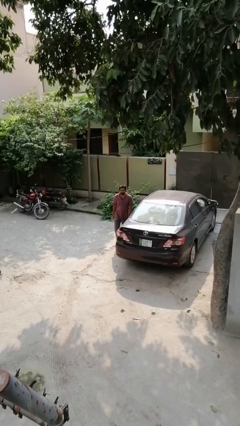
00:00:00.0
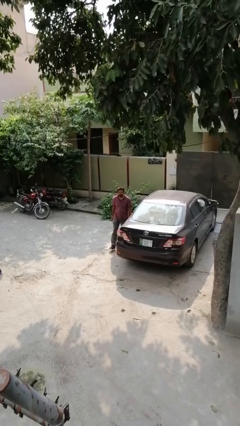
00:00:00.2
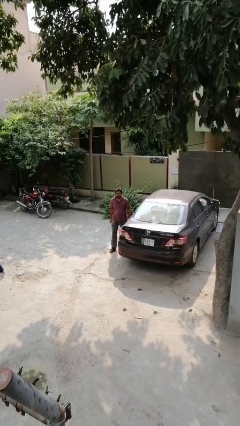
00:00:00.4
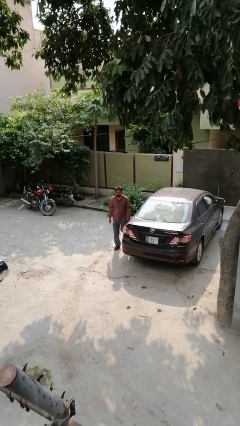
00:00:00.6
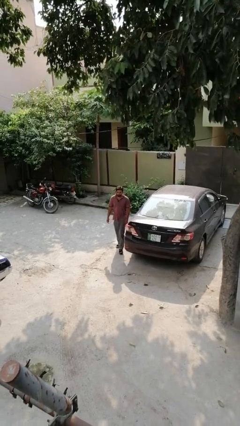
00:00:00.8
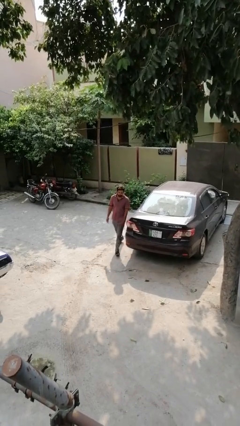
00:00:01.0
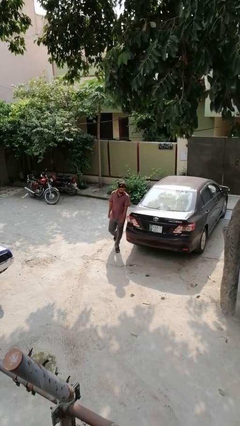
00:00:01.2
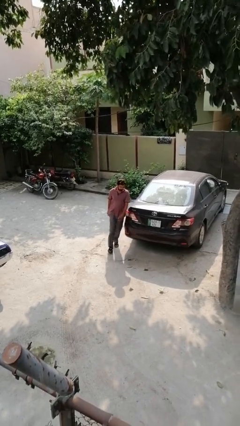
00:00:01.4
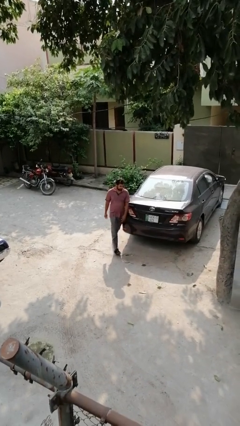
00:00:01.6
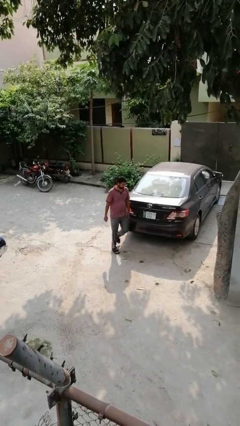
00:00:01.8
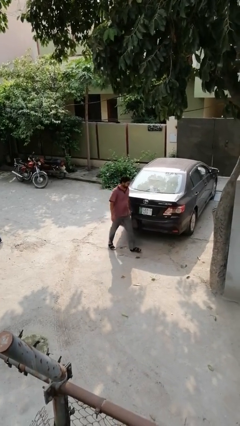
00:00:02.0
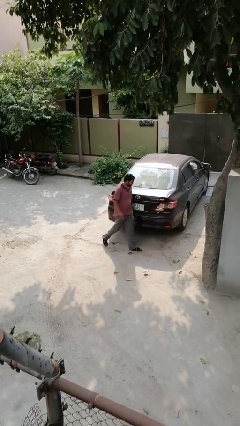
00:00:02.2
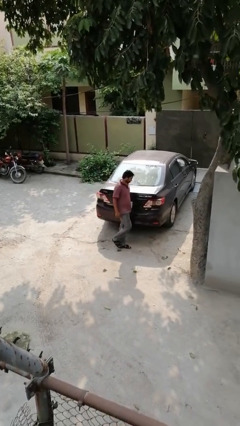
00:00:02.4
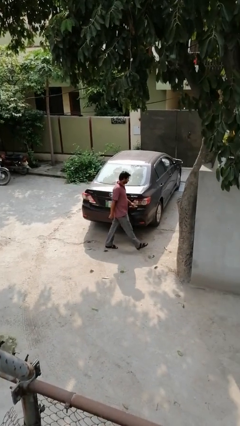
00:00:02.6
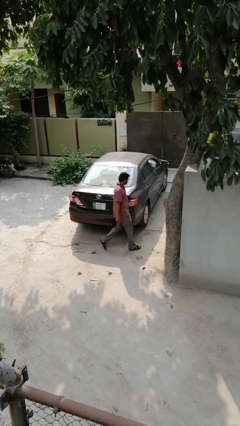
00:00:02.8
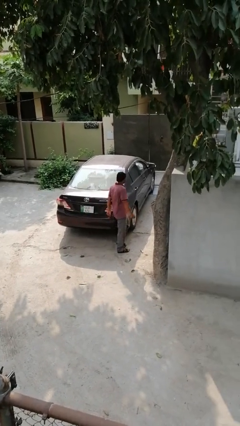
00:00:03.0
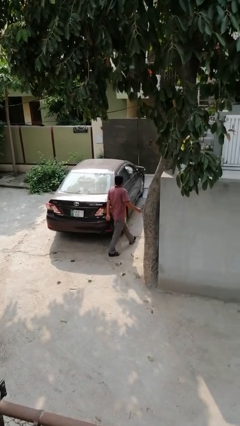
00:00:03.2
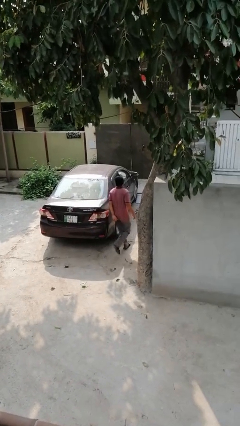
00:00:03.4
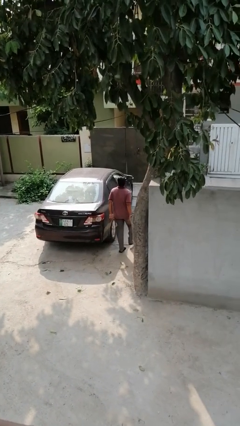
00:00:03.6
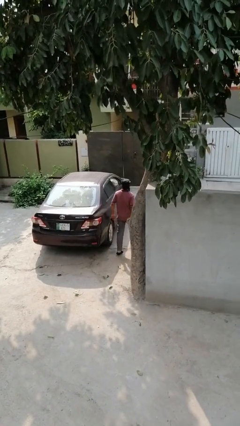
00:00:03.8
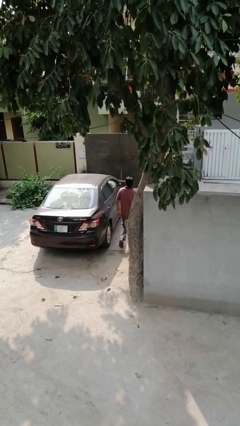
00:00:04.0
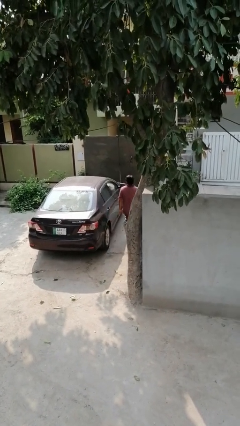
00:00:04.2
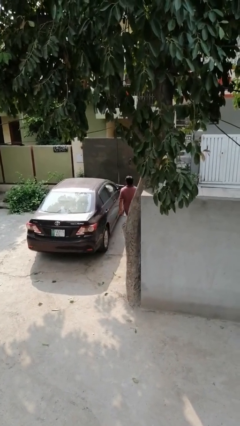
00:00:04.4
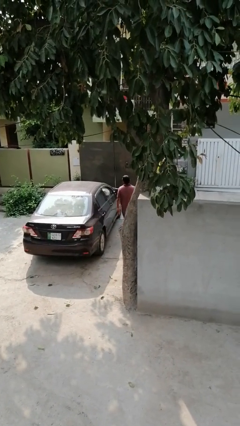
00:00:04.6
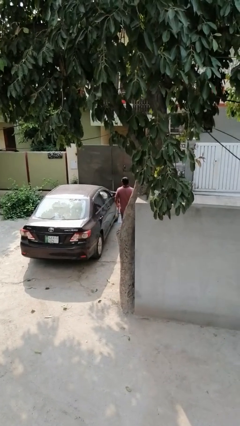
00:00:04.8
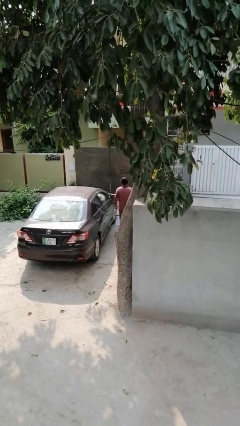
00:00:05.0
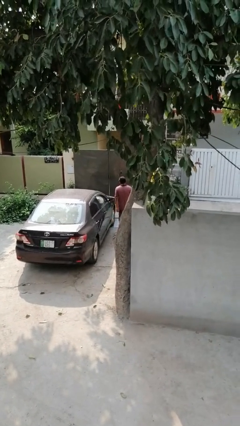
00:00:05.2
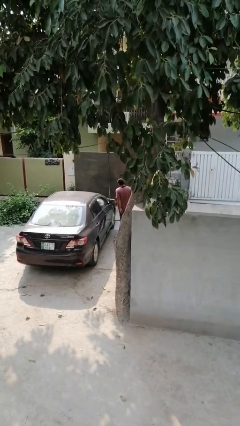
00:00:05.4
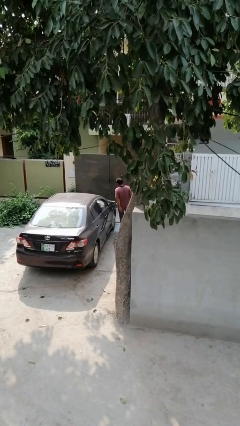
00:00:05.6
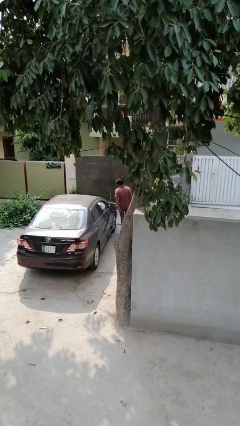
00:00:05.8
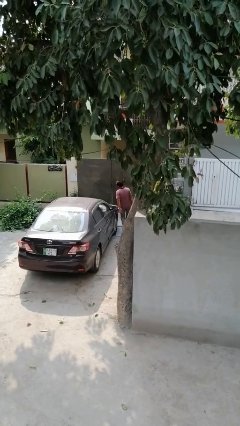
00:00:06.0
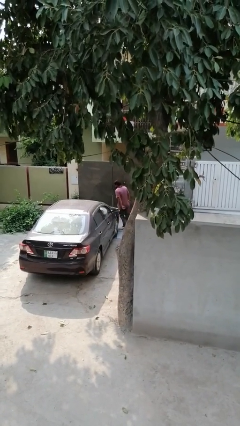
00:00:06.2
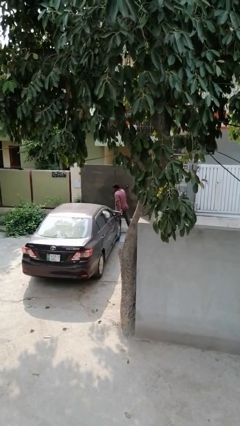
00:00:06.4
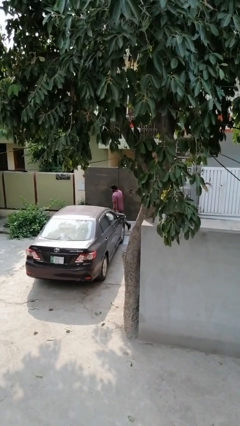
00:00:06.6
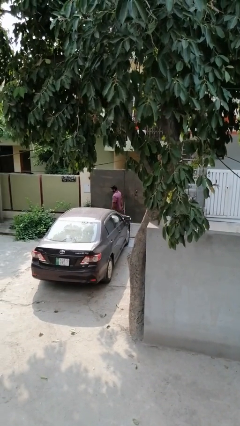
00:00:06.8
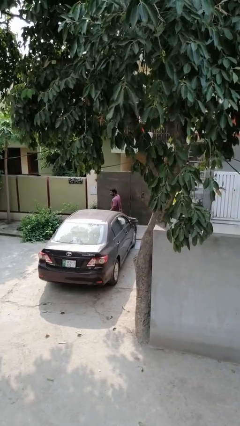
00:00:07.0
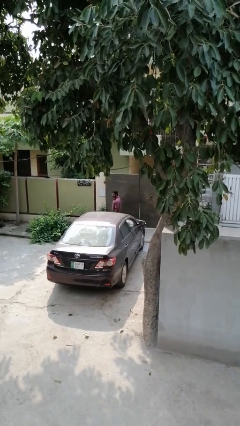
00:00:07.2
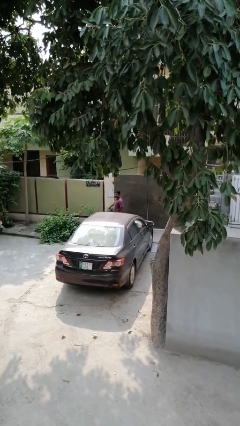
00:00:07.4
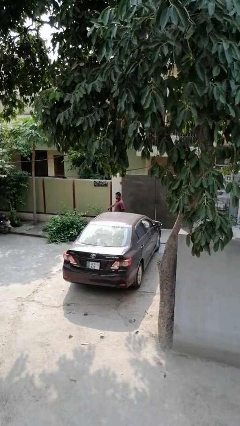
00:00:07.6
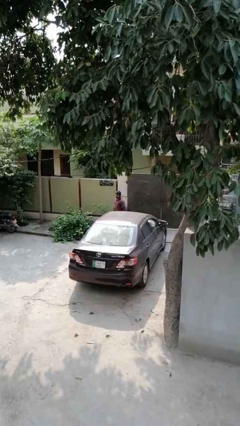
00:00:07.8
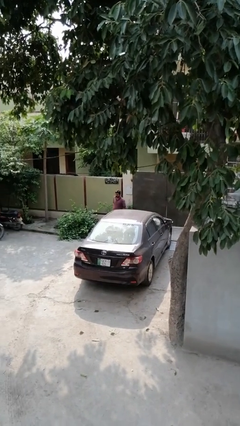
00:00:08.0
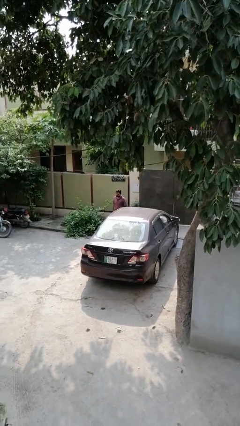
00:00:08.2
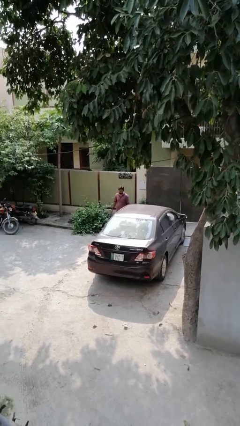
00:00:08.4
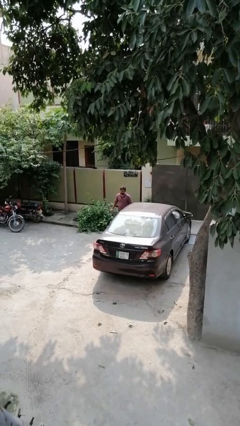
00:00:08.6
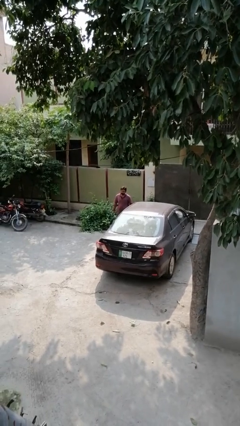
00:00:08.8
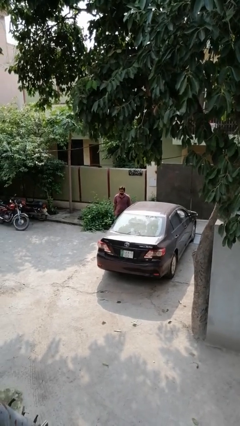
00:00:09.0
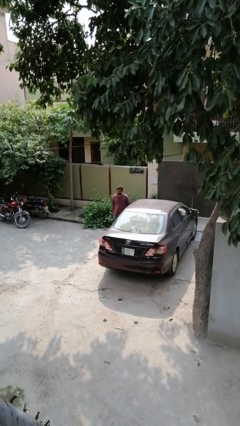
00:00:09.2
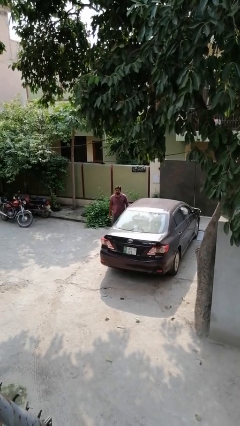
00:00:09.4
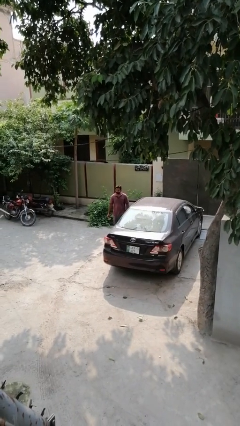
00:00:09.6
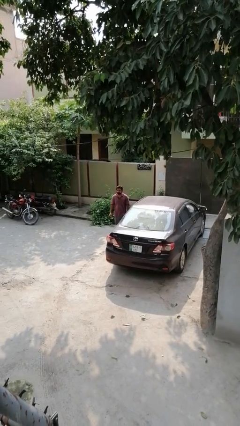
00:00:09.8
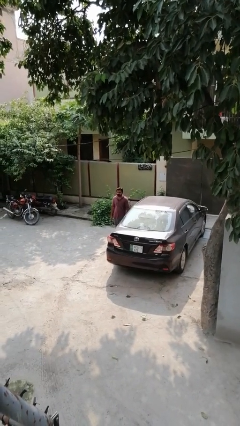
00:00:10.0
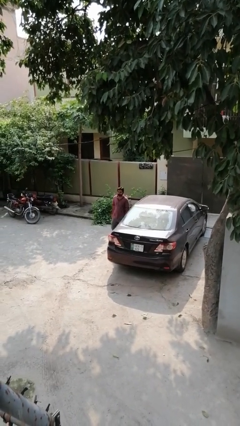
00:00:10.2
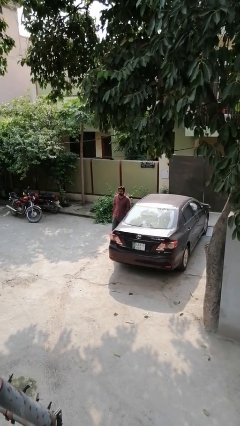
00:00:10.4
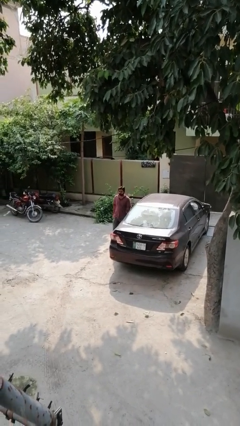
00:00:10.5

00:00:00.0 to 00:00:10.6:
person walks around car

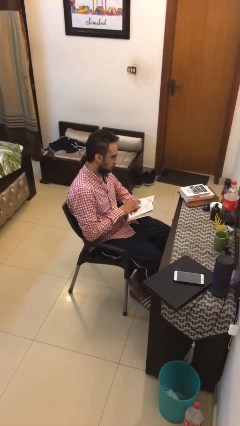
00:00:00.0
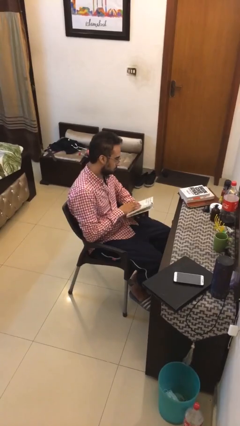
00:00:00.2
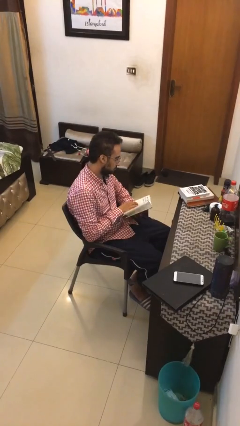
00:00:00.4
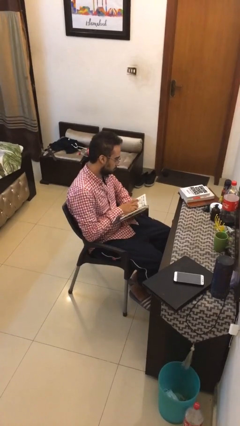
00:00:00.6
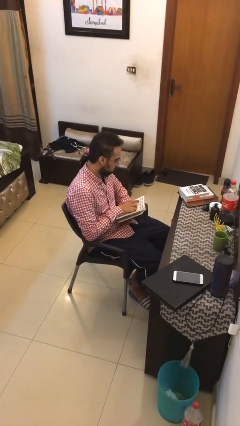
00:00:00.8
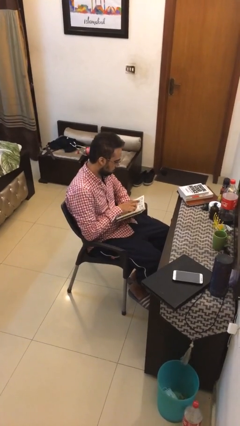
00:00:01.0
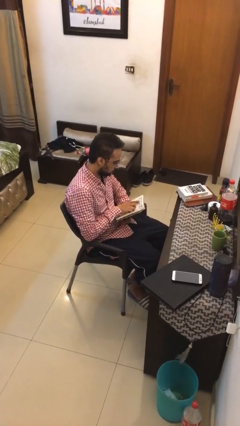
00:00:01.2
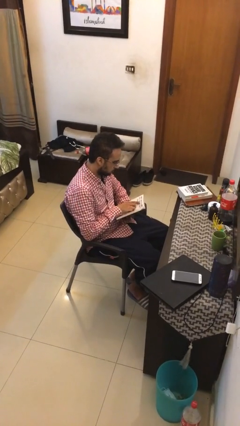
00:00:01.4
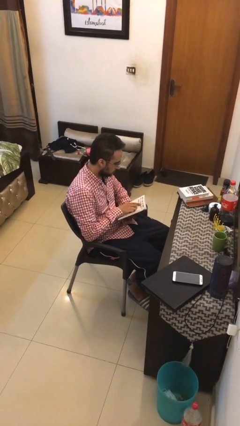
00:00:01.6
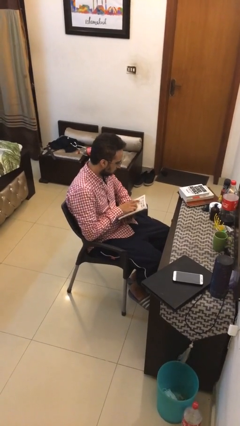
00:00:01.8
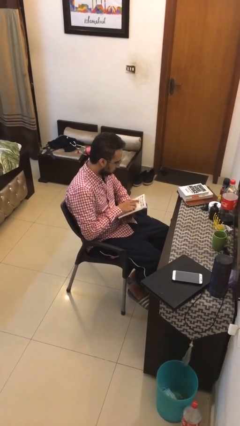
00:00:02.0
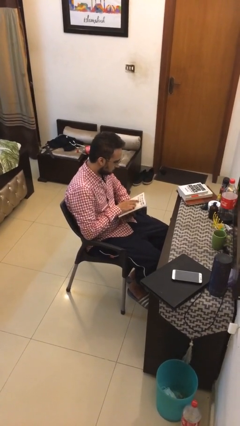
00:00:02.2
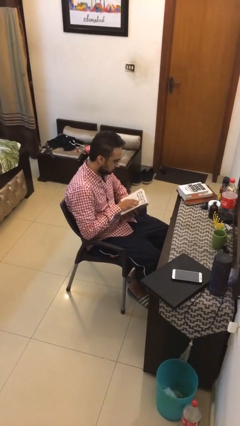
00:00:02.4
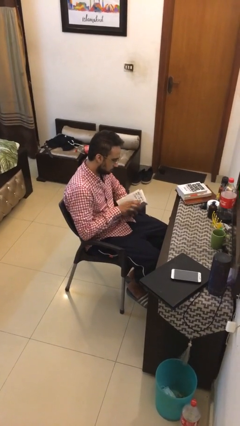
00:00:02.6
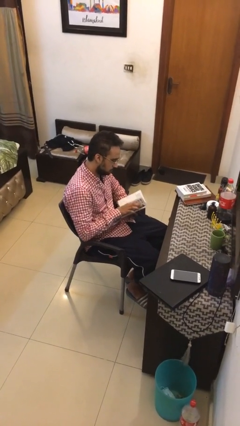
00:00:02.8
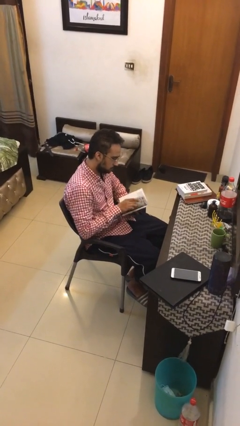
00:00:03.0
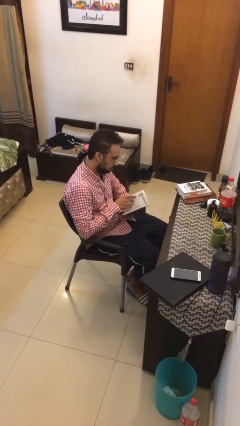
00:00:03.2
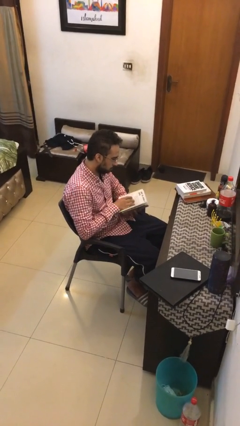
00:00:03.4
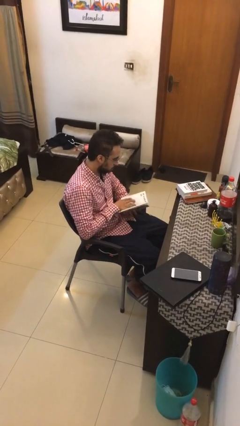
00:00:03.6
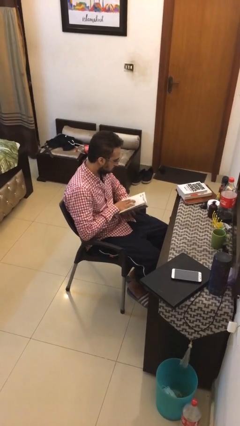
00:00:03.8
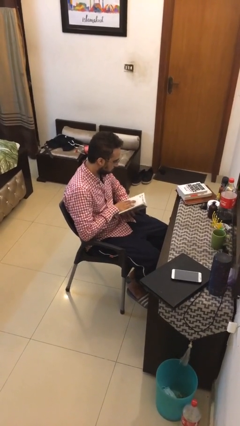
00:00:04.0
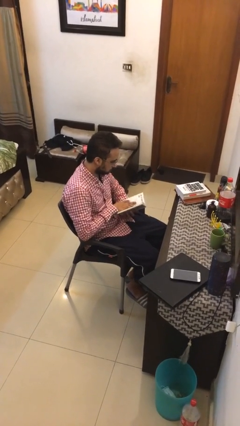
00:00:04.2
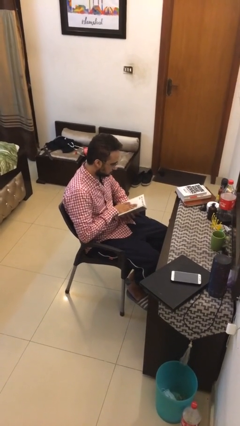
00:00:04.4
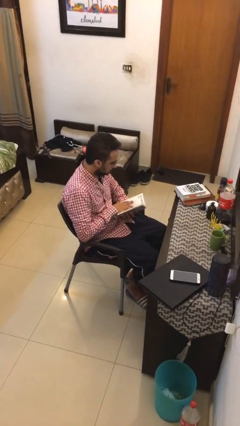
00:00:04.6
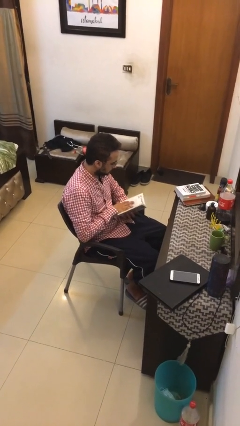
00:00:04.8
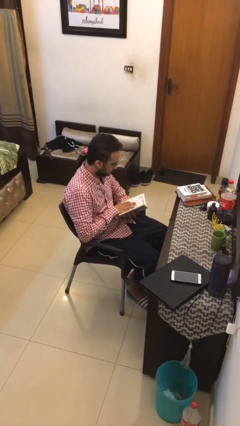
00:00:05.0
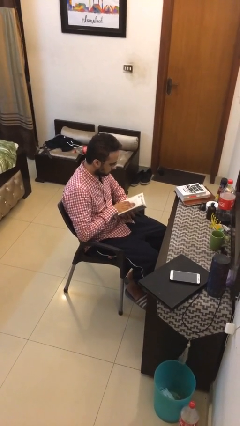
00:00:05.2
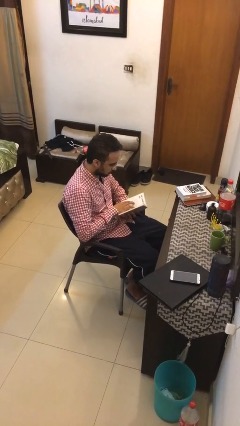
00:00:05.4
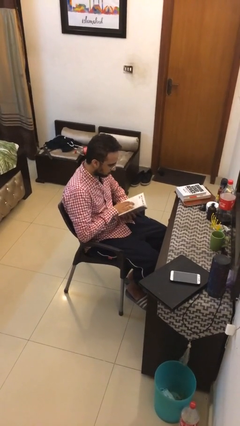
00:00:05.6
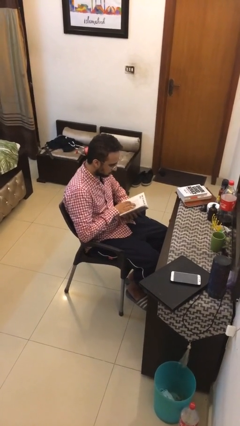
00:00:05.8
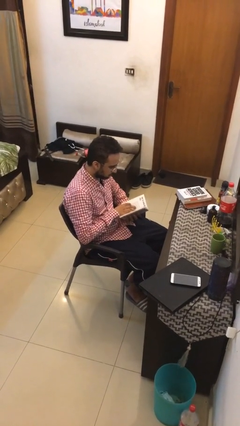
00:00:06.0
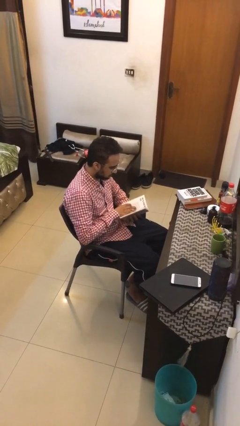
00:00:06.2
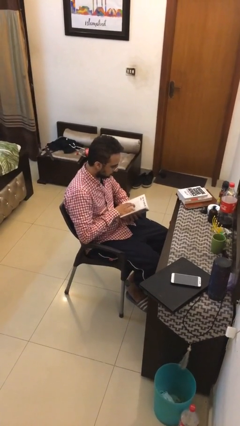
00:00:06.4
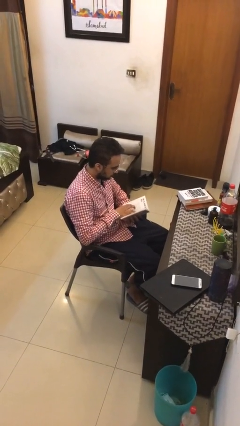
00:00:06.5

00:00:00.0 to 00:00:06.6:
person reads document

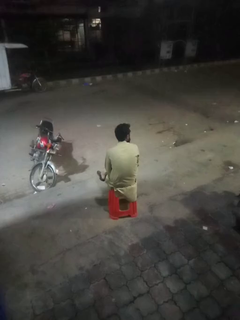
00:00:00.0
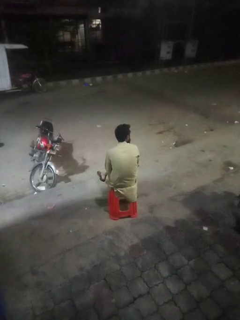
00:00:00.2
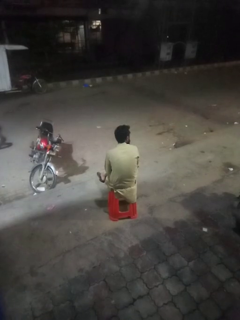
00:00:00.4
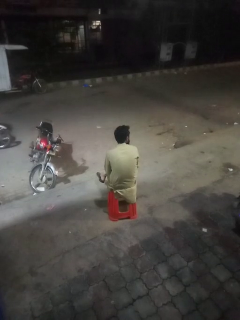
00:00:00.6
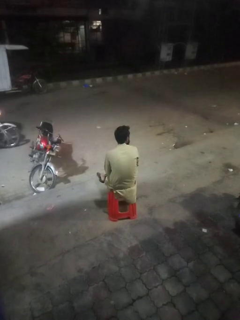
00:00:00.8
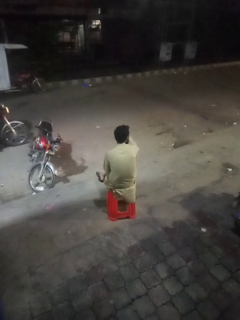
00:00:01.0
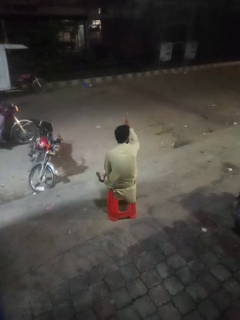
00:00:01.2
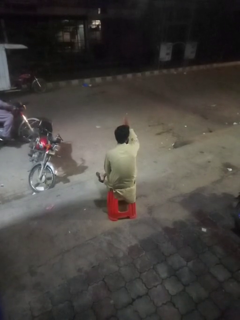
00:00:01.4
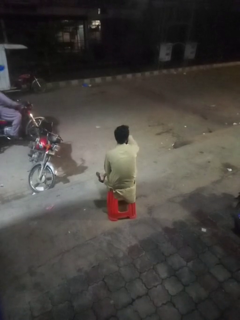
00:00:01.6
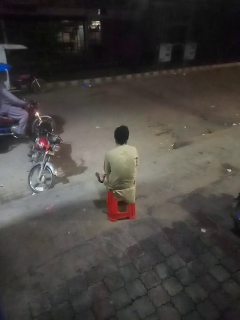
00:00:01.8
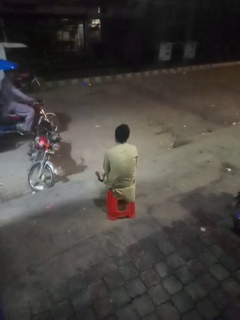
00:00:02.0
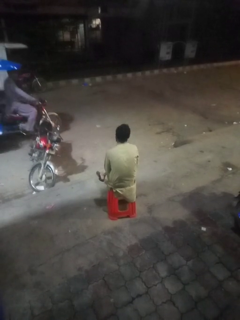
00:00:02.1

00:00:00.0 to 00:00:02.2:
person gestures number one
